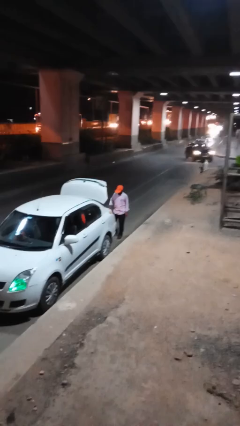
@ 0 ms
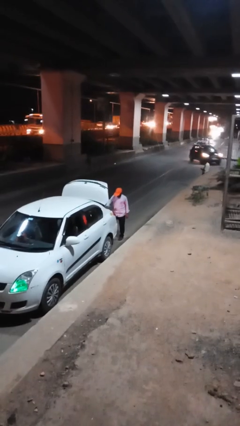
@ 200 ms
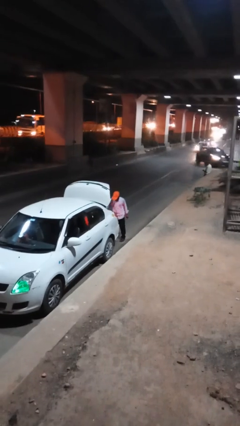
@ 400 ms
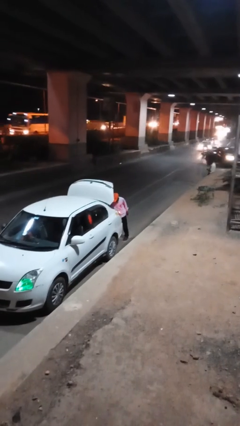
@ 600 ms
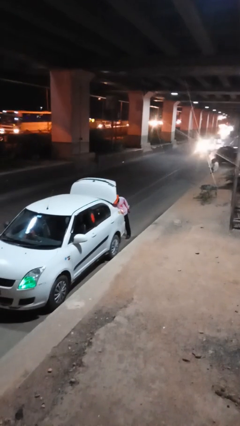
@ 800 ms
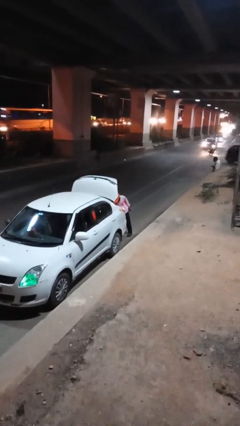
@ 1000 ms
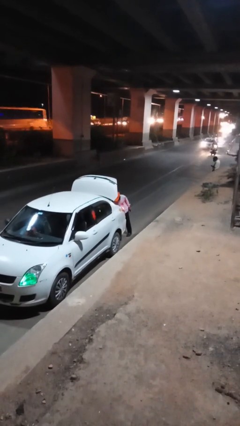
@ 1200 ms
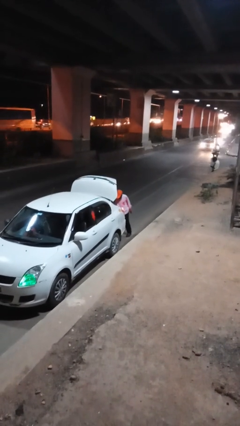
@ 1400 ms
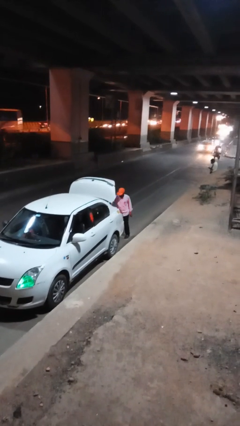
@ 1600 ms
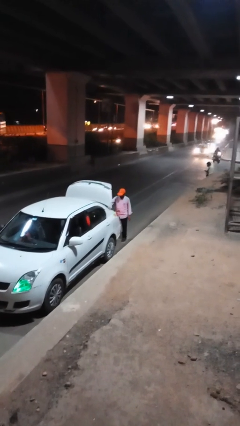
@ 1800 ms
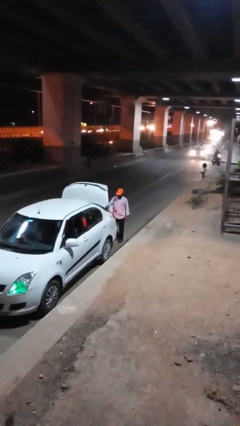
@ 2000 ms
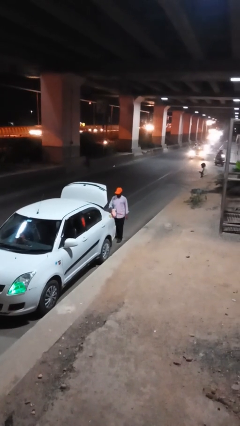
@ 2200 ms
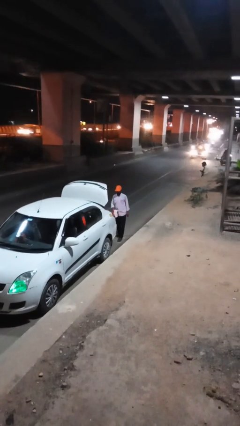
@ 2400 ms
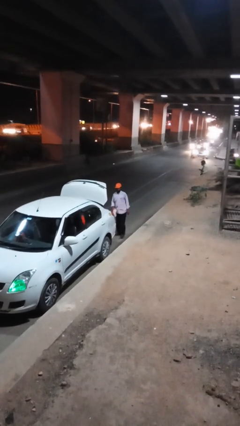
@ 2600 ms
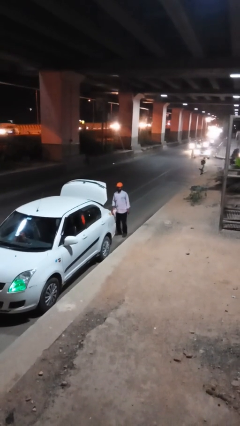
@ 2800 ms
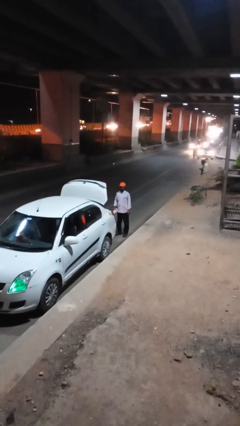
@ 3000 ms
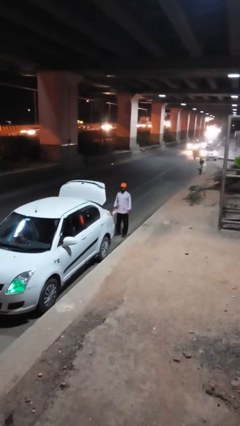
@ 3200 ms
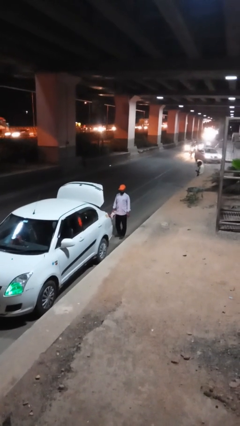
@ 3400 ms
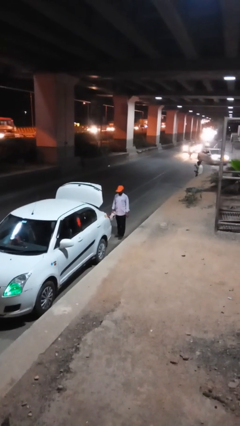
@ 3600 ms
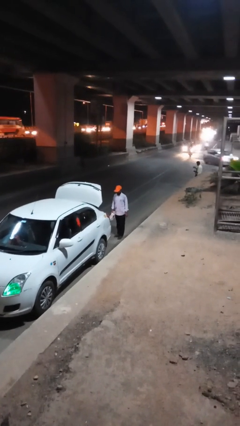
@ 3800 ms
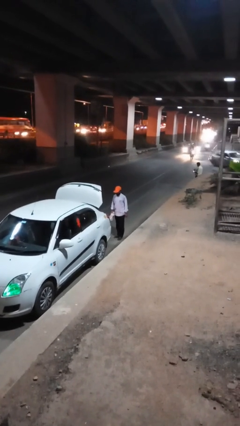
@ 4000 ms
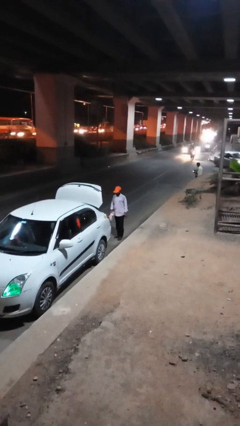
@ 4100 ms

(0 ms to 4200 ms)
person unloads car

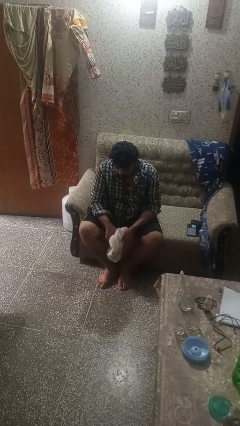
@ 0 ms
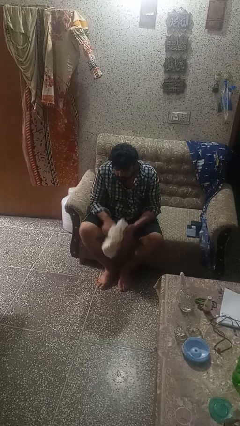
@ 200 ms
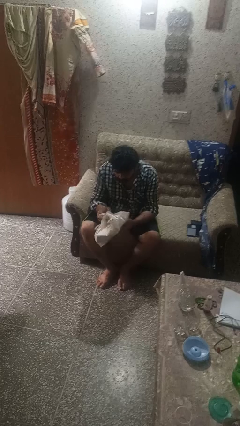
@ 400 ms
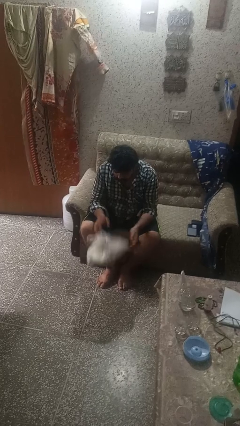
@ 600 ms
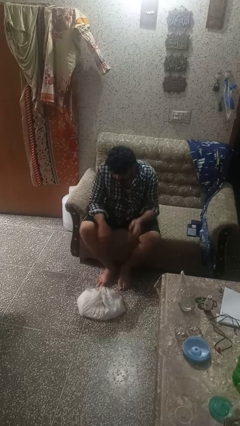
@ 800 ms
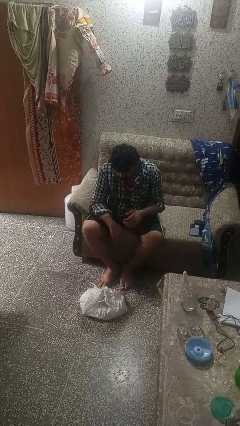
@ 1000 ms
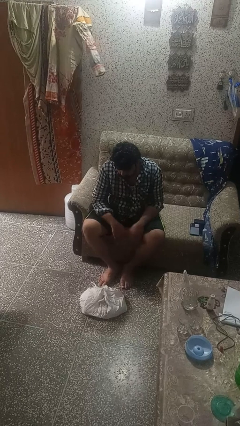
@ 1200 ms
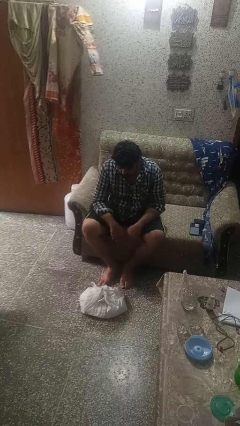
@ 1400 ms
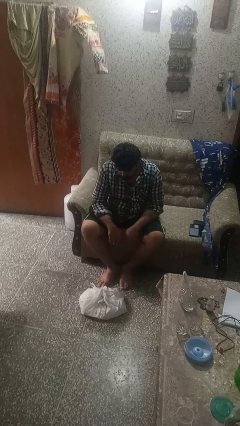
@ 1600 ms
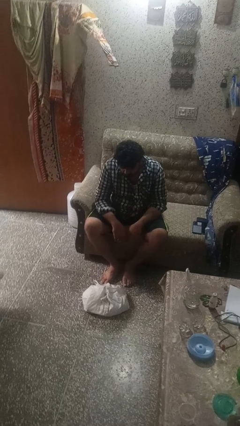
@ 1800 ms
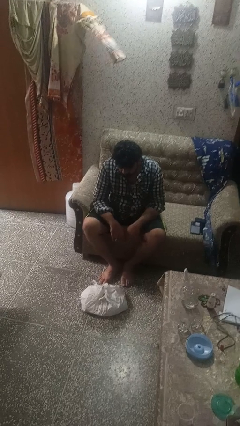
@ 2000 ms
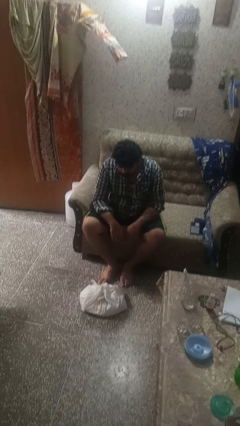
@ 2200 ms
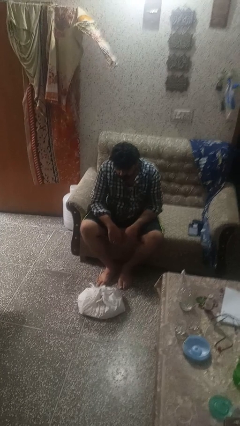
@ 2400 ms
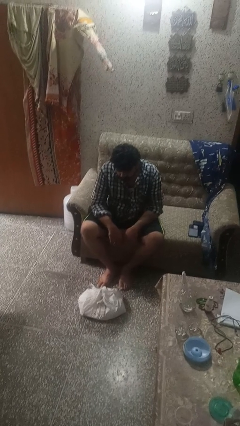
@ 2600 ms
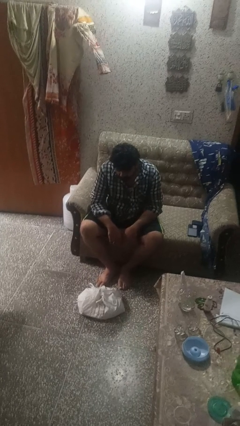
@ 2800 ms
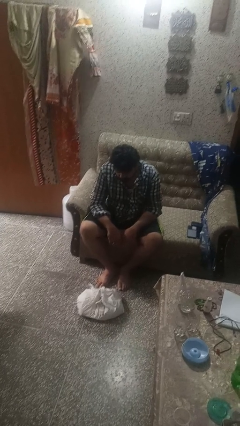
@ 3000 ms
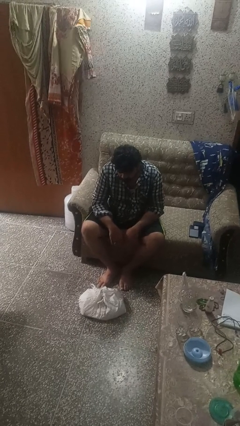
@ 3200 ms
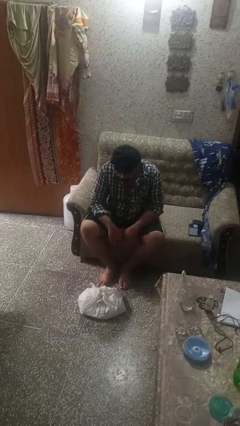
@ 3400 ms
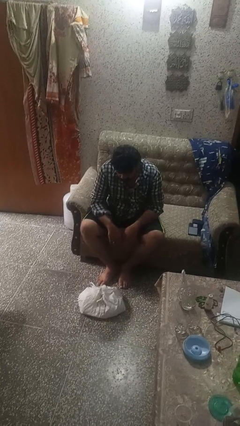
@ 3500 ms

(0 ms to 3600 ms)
person throws object to ground

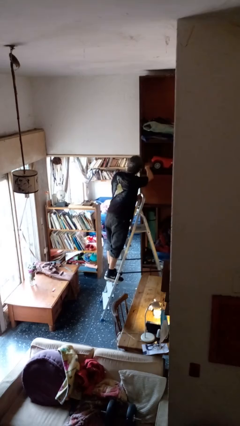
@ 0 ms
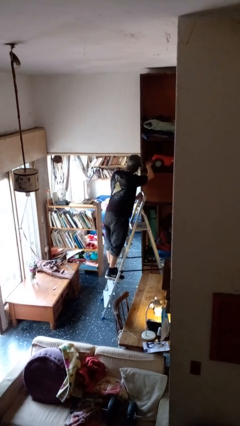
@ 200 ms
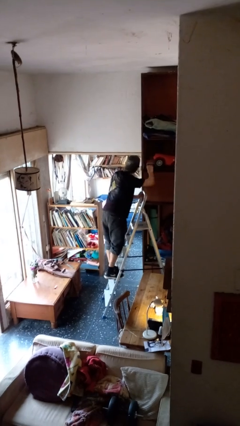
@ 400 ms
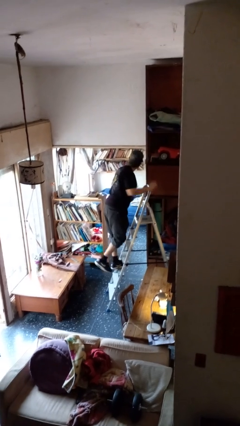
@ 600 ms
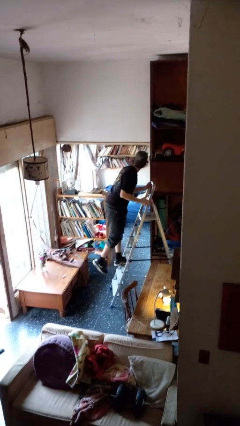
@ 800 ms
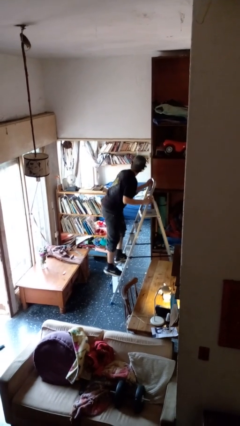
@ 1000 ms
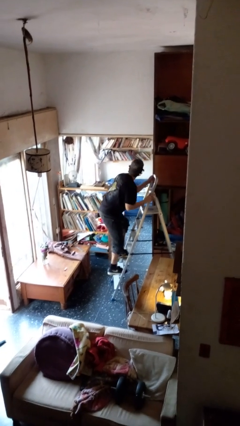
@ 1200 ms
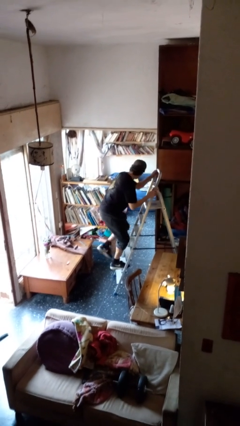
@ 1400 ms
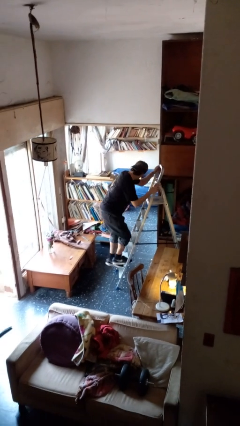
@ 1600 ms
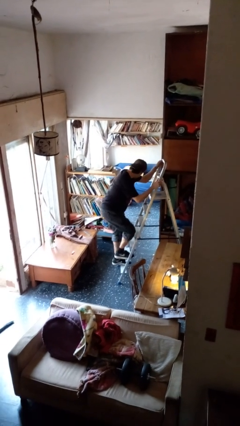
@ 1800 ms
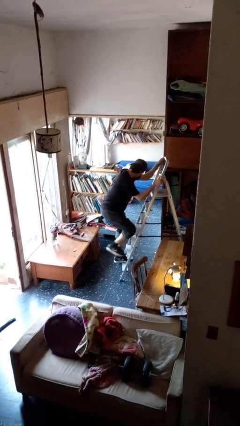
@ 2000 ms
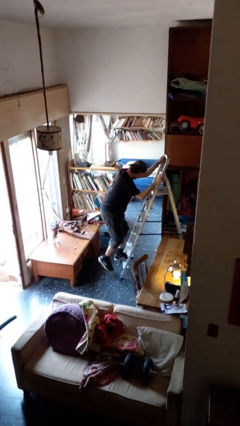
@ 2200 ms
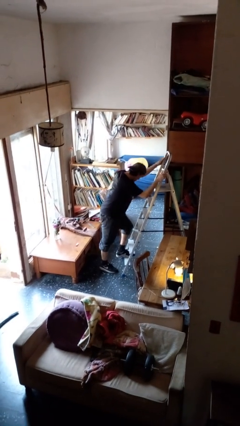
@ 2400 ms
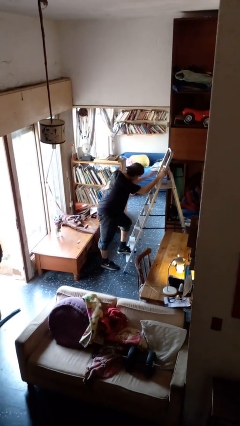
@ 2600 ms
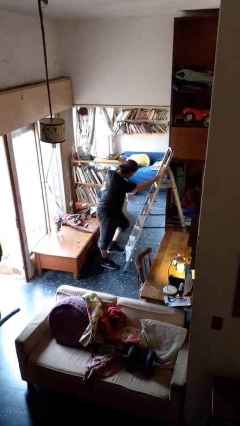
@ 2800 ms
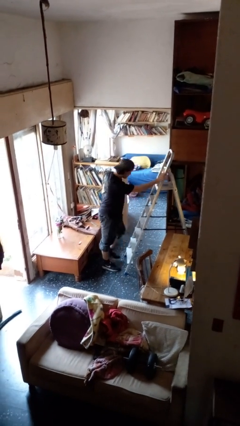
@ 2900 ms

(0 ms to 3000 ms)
person climbs down ladder

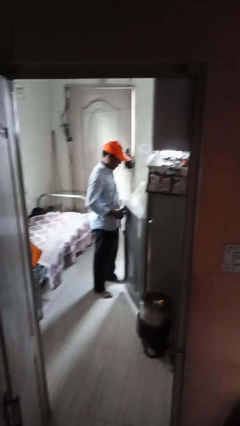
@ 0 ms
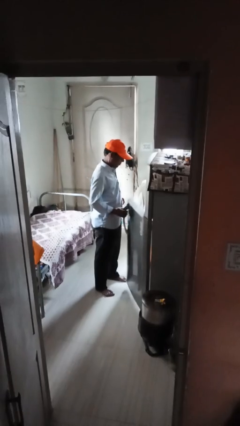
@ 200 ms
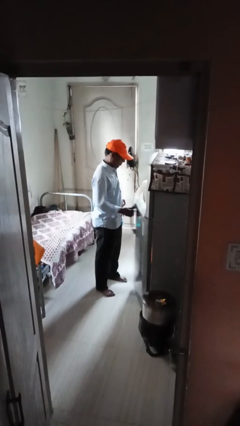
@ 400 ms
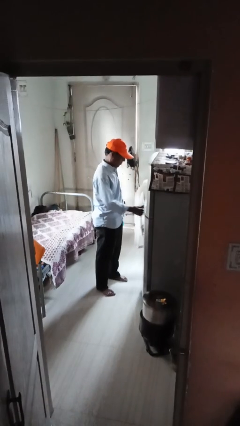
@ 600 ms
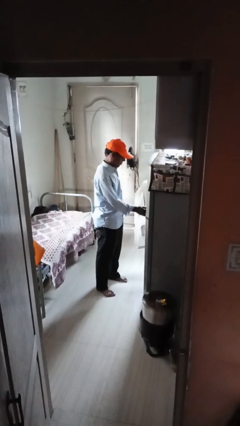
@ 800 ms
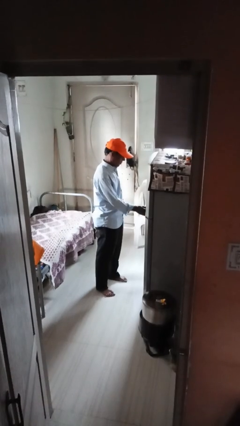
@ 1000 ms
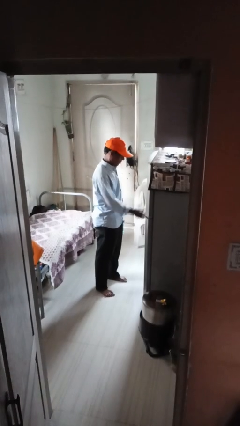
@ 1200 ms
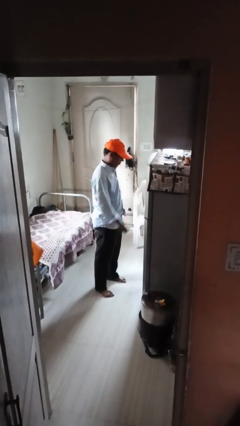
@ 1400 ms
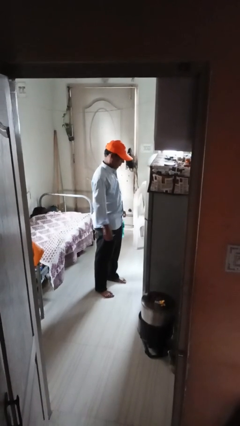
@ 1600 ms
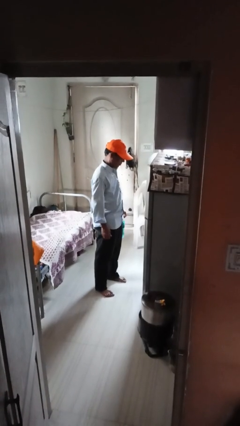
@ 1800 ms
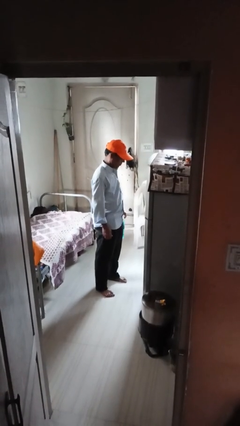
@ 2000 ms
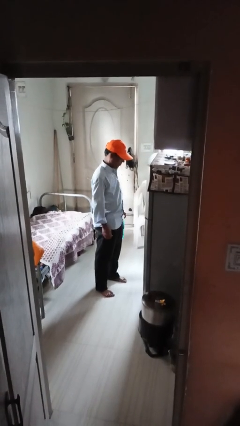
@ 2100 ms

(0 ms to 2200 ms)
person closes refrigerator

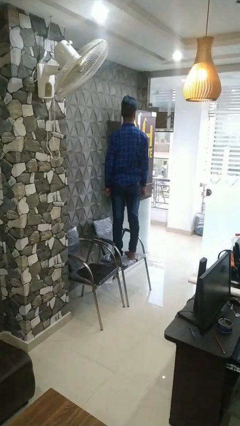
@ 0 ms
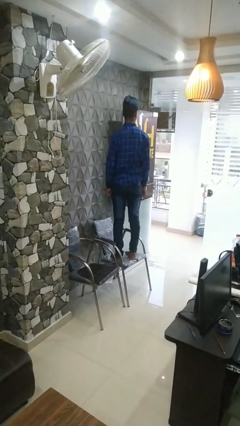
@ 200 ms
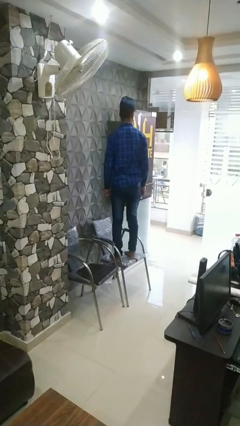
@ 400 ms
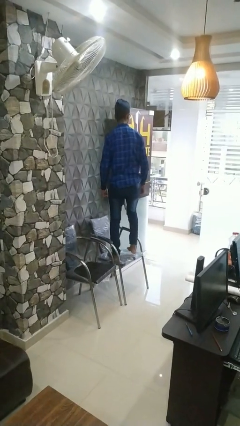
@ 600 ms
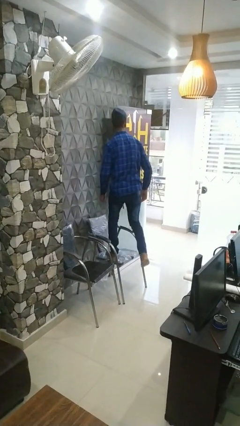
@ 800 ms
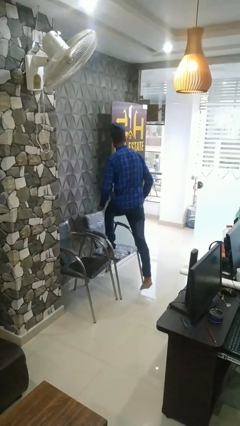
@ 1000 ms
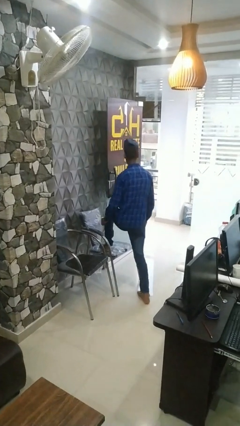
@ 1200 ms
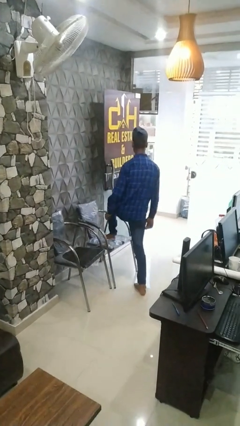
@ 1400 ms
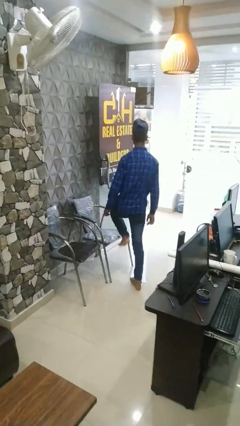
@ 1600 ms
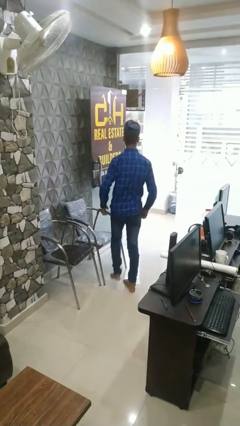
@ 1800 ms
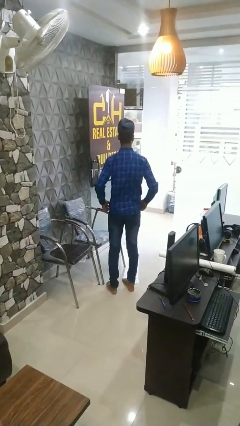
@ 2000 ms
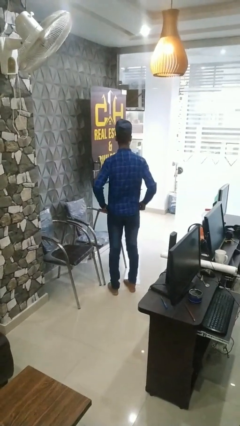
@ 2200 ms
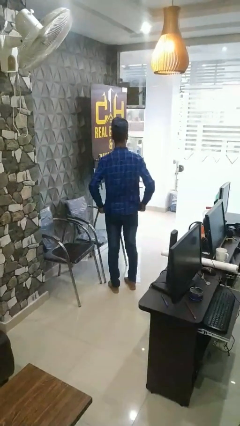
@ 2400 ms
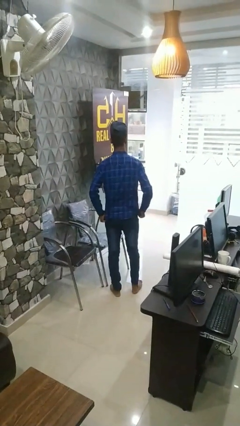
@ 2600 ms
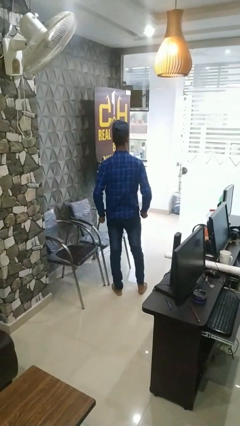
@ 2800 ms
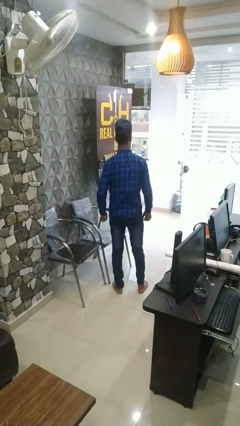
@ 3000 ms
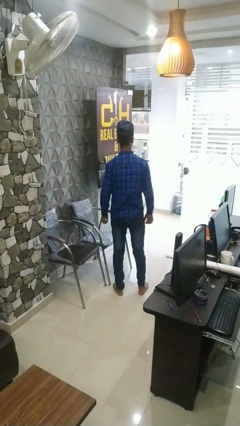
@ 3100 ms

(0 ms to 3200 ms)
person climbs off chair

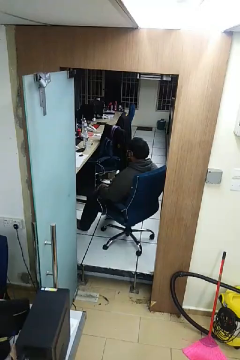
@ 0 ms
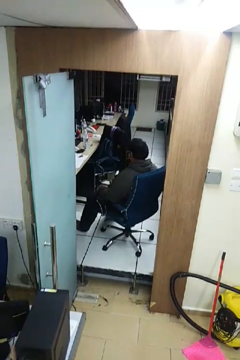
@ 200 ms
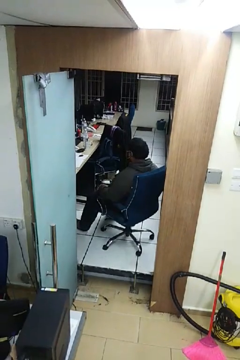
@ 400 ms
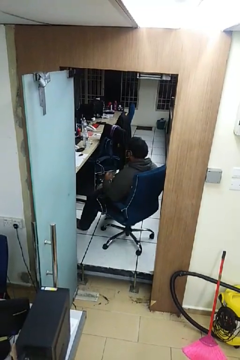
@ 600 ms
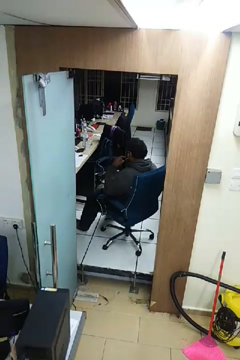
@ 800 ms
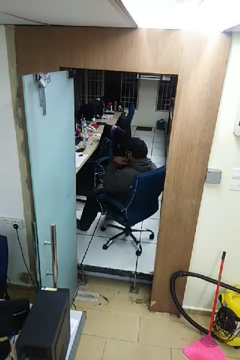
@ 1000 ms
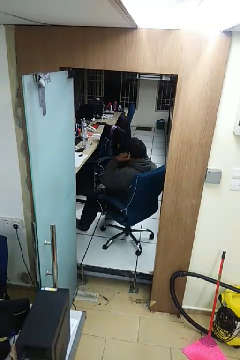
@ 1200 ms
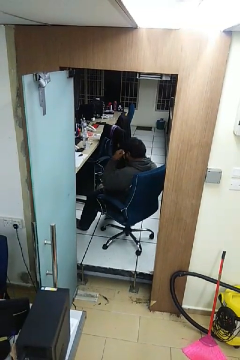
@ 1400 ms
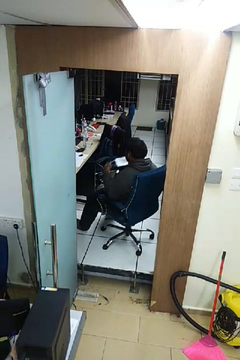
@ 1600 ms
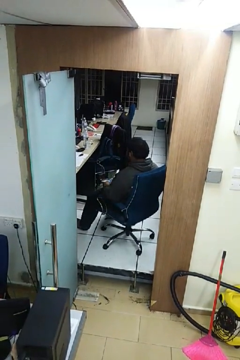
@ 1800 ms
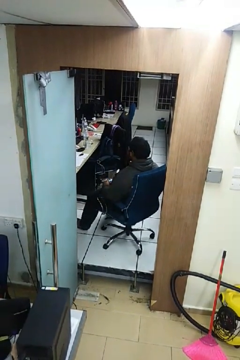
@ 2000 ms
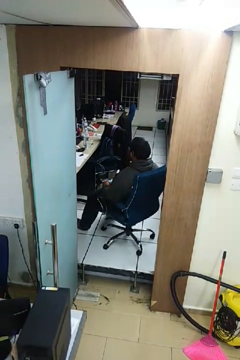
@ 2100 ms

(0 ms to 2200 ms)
person takes off facemask
